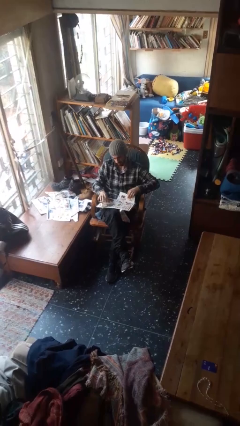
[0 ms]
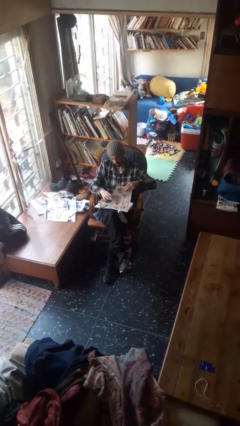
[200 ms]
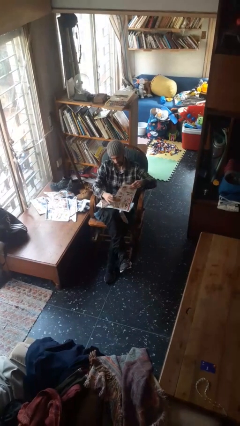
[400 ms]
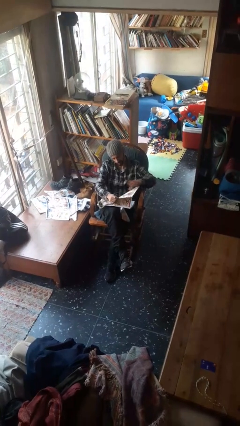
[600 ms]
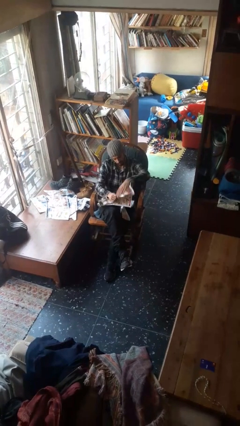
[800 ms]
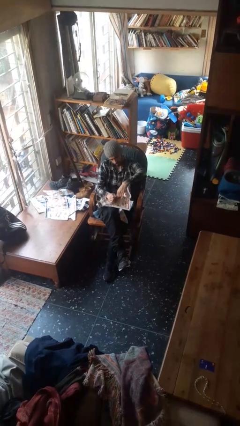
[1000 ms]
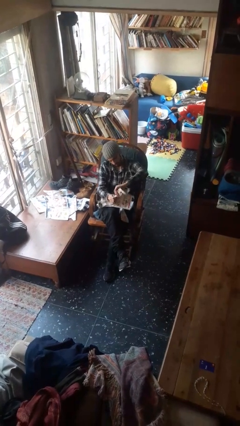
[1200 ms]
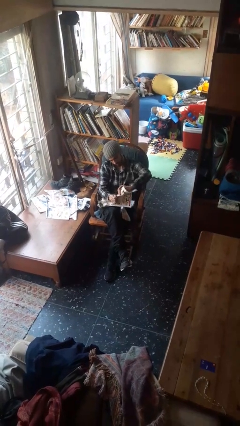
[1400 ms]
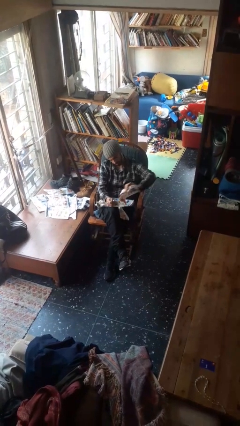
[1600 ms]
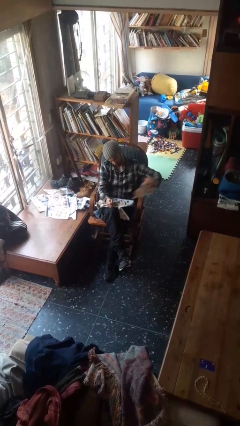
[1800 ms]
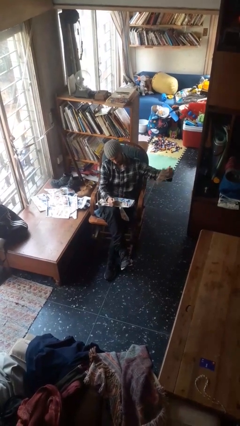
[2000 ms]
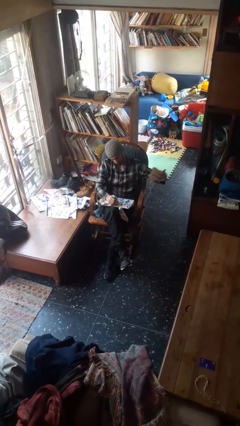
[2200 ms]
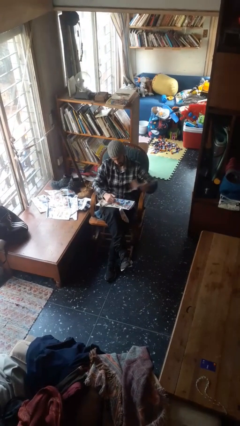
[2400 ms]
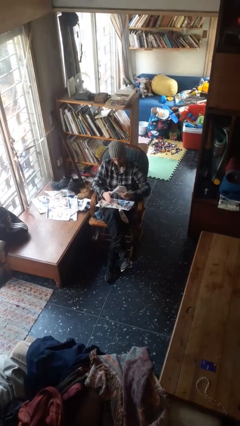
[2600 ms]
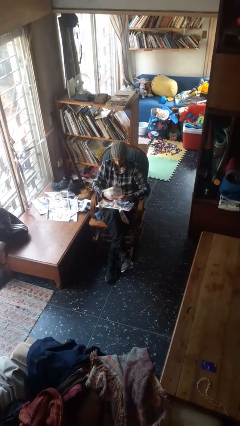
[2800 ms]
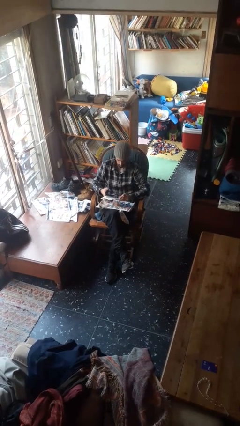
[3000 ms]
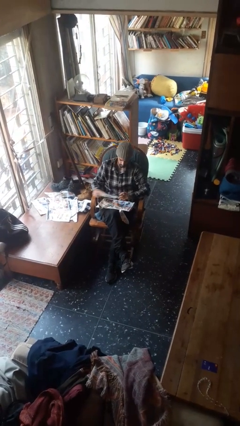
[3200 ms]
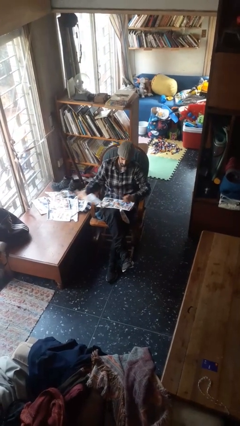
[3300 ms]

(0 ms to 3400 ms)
person tears paper

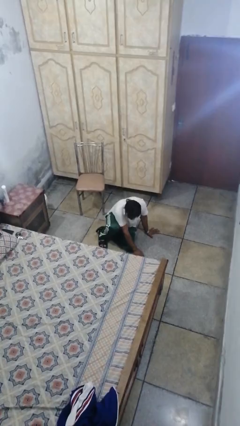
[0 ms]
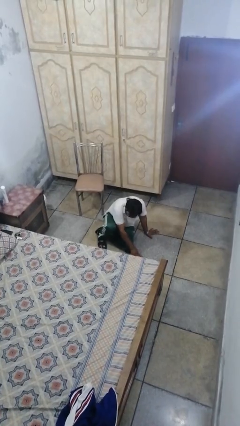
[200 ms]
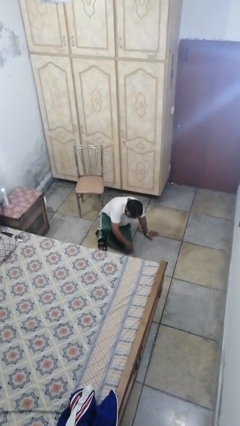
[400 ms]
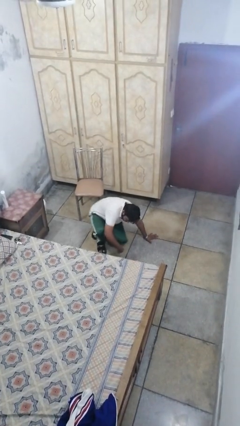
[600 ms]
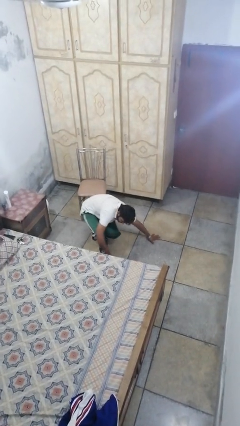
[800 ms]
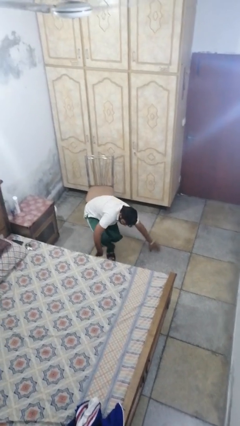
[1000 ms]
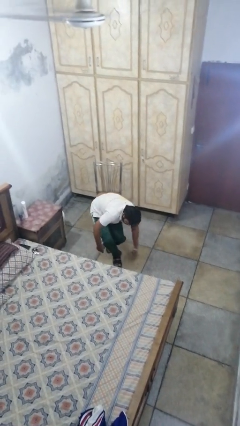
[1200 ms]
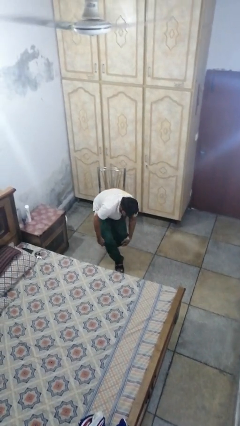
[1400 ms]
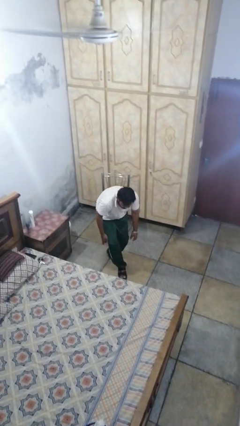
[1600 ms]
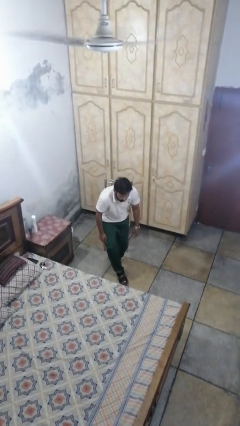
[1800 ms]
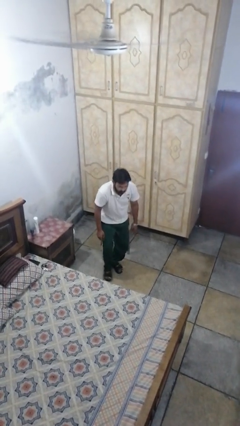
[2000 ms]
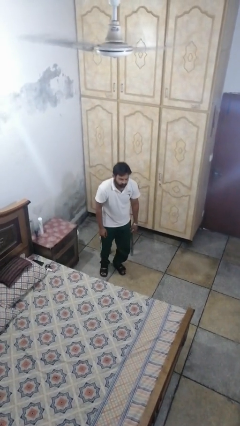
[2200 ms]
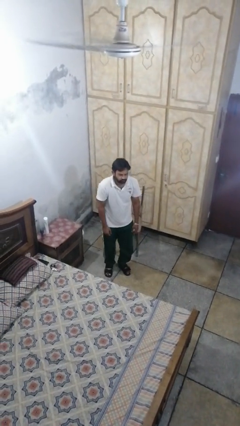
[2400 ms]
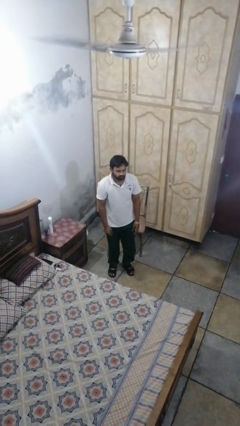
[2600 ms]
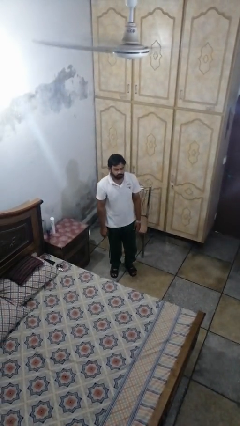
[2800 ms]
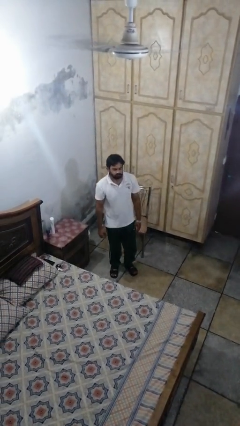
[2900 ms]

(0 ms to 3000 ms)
person stands up from floor

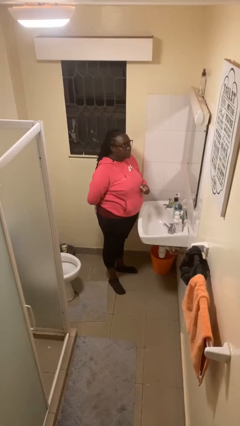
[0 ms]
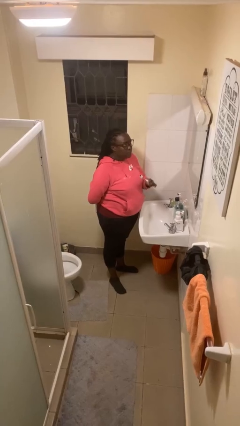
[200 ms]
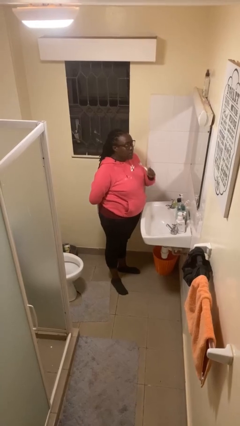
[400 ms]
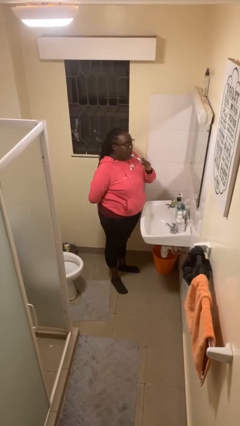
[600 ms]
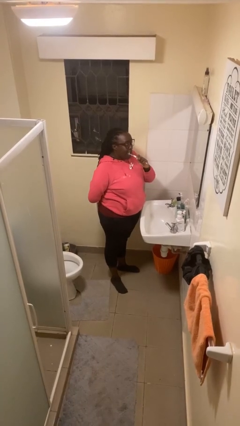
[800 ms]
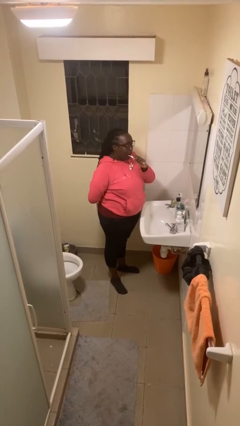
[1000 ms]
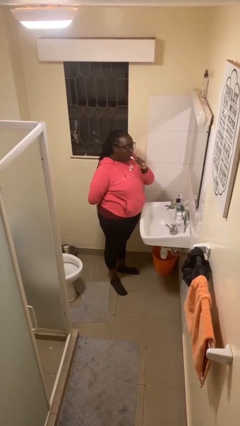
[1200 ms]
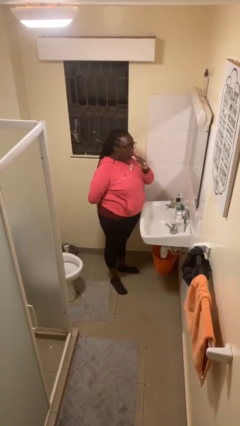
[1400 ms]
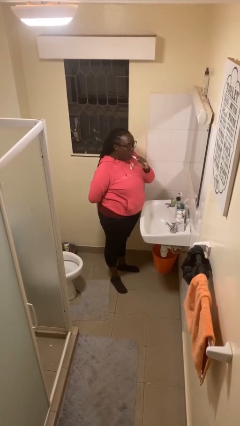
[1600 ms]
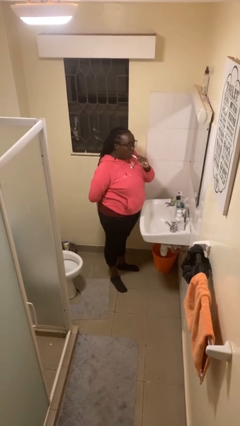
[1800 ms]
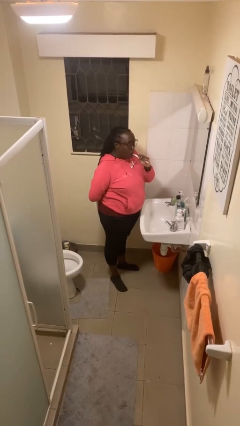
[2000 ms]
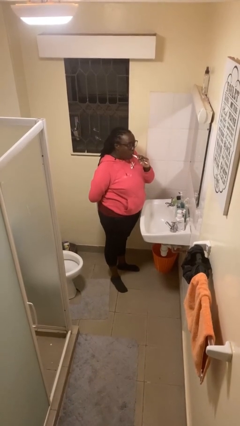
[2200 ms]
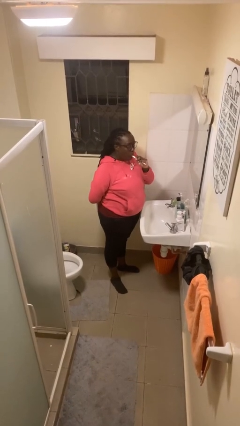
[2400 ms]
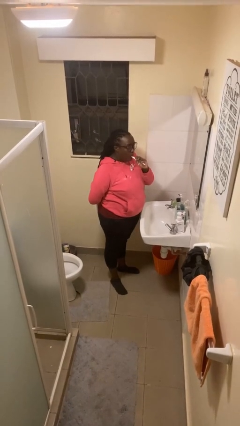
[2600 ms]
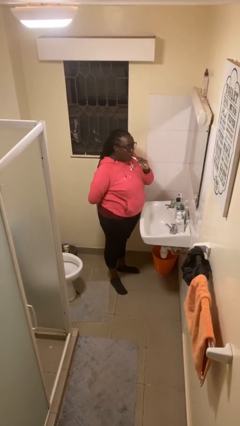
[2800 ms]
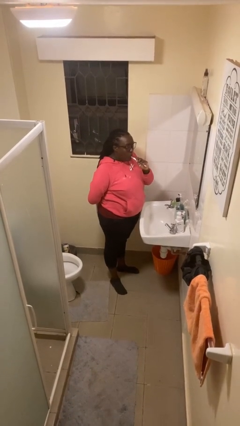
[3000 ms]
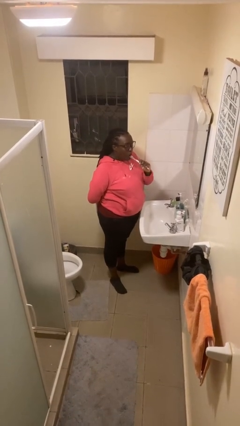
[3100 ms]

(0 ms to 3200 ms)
person brushes teeth

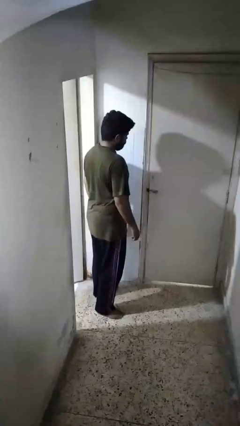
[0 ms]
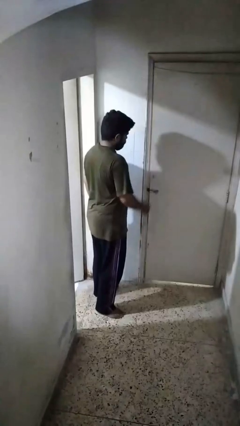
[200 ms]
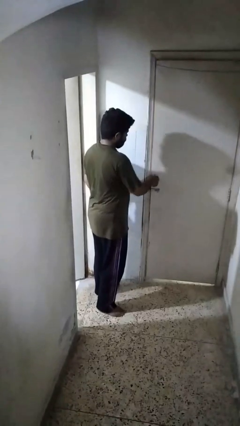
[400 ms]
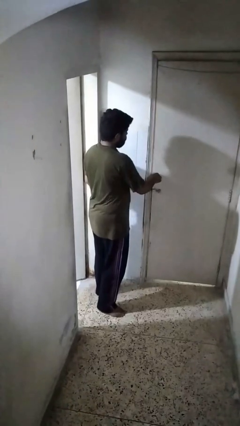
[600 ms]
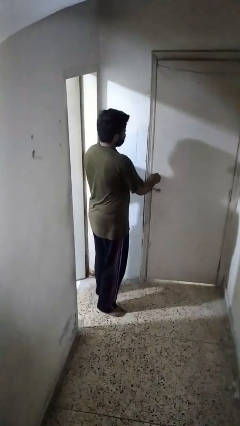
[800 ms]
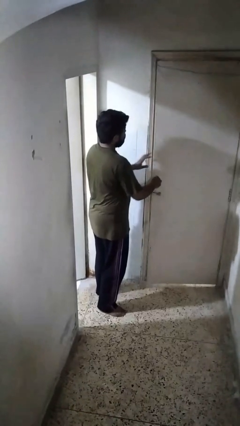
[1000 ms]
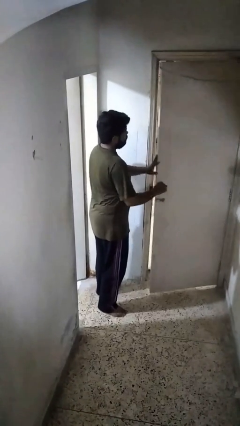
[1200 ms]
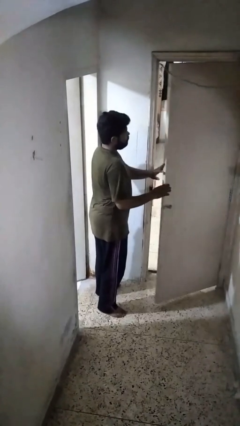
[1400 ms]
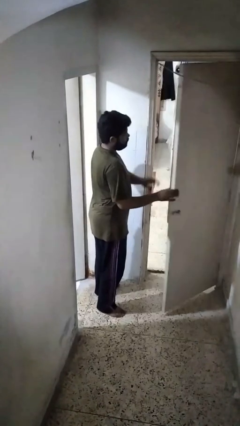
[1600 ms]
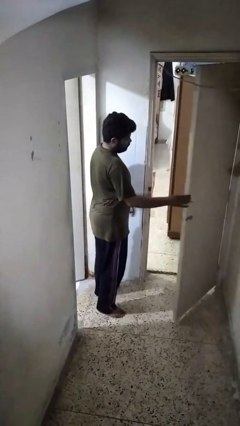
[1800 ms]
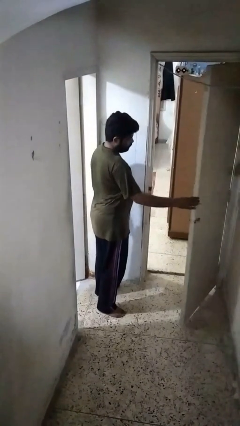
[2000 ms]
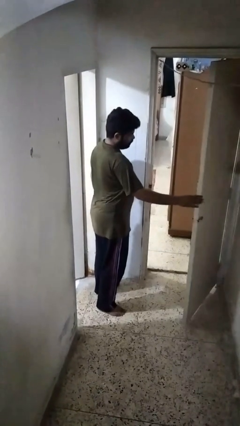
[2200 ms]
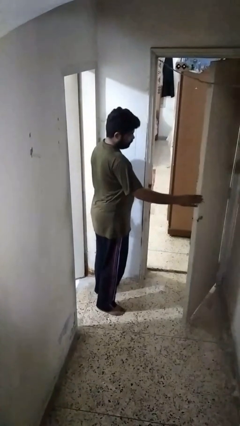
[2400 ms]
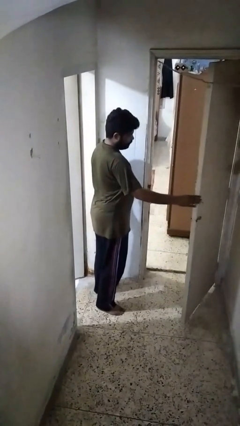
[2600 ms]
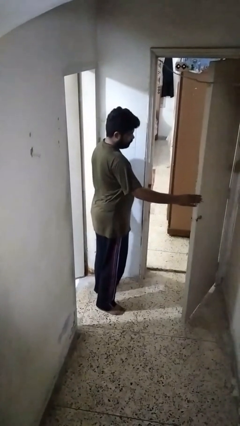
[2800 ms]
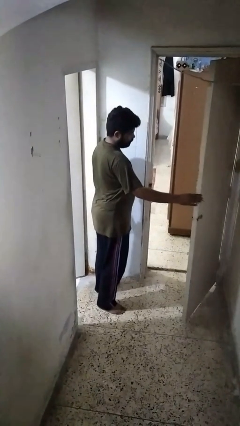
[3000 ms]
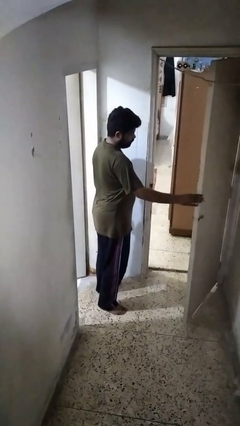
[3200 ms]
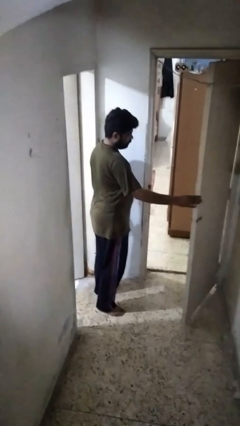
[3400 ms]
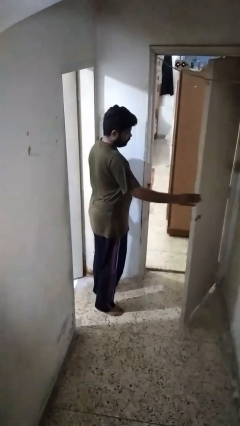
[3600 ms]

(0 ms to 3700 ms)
person opens facility door

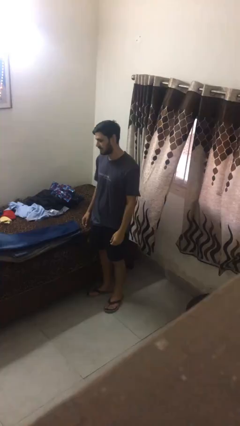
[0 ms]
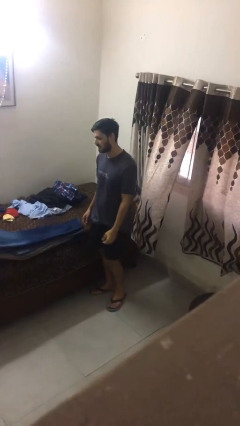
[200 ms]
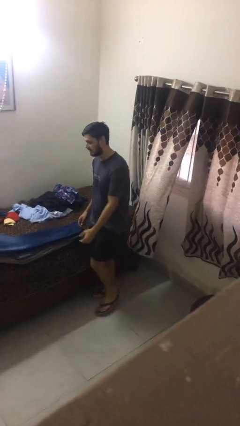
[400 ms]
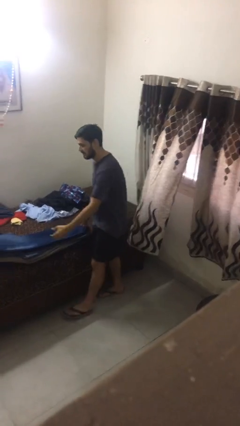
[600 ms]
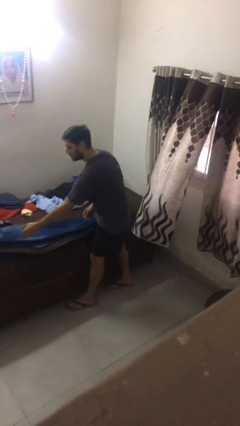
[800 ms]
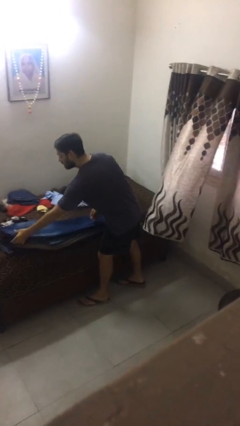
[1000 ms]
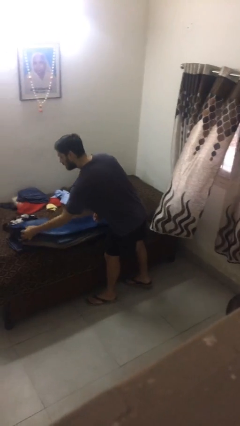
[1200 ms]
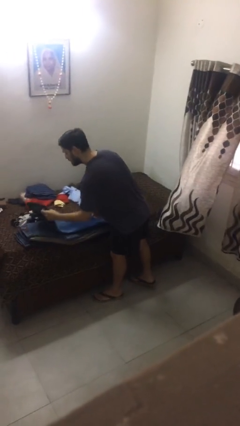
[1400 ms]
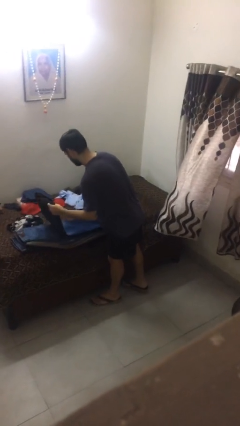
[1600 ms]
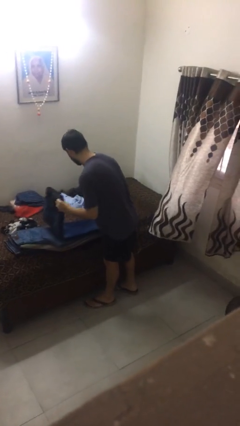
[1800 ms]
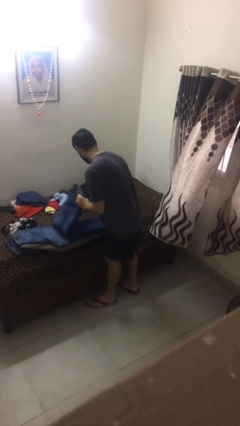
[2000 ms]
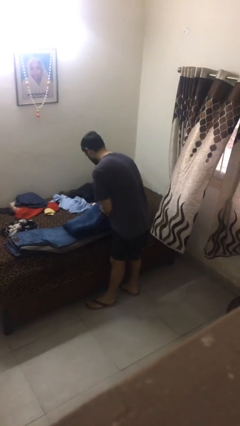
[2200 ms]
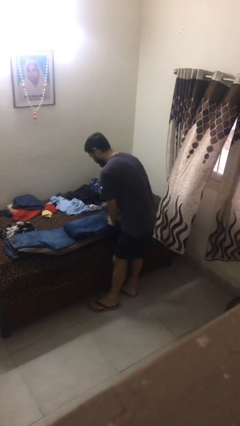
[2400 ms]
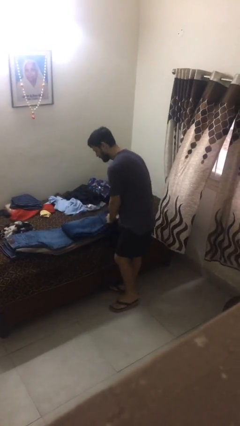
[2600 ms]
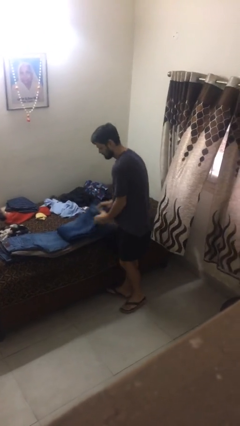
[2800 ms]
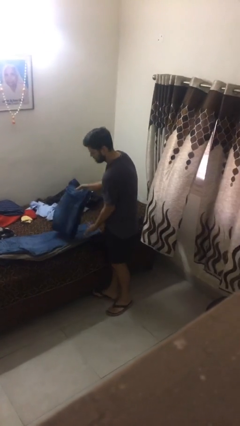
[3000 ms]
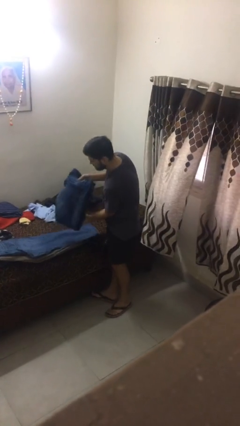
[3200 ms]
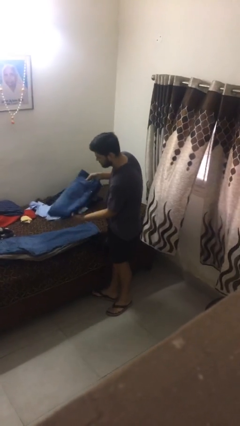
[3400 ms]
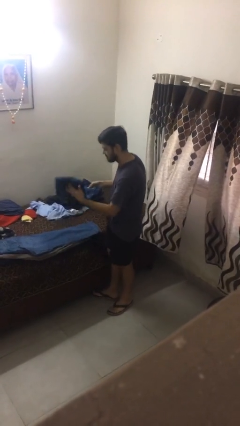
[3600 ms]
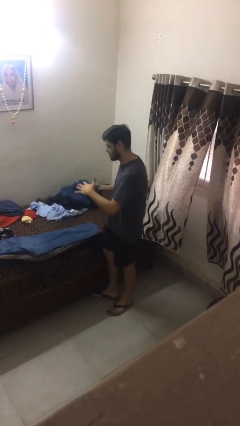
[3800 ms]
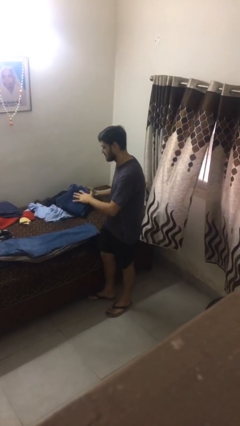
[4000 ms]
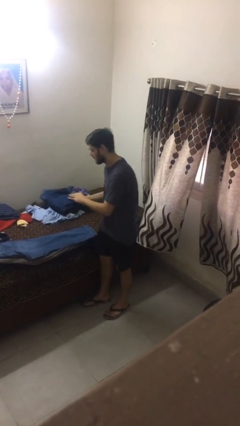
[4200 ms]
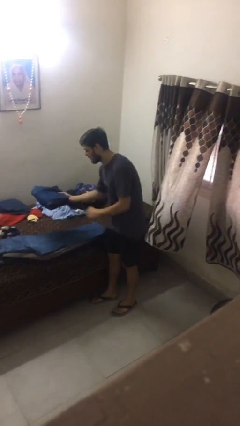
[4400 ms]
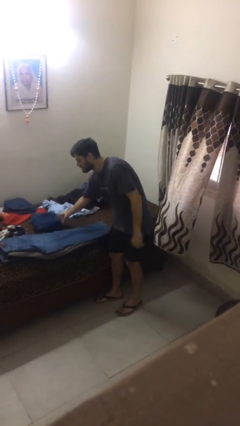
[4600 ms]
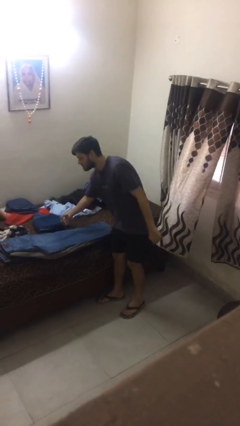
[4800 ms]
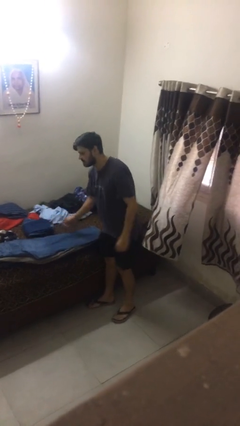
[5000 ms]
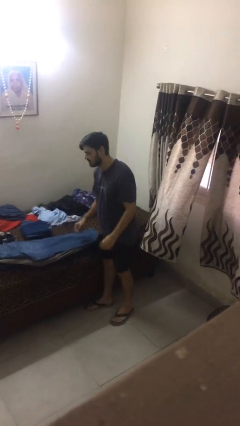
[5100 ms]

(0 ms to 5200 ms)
person folds pants
